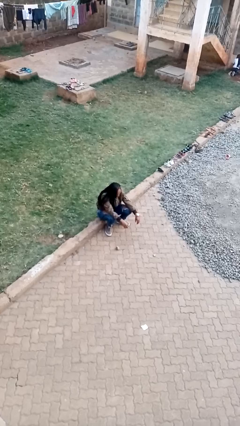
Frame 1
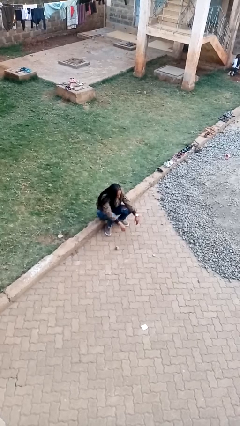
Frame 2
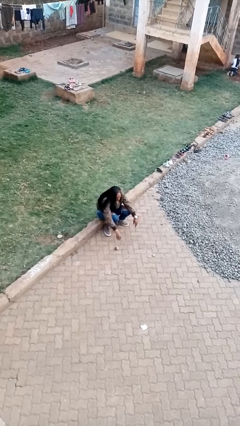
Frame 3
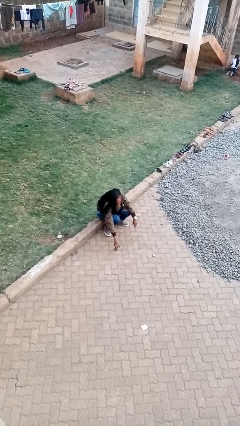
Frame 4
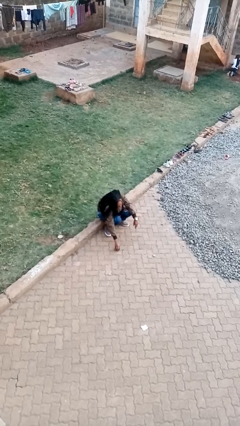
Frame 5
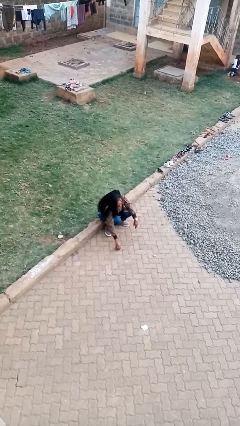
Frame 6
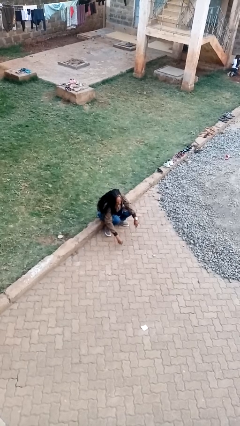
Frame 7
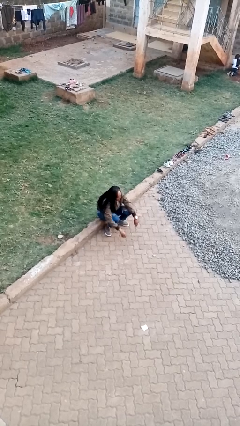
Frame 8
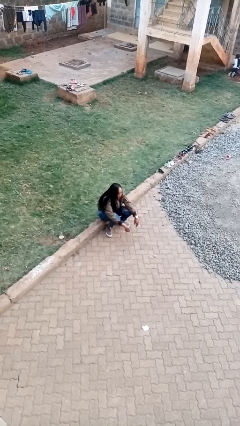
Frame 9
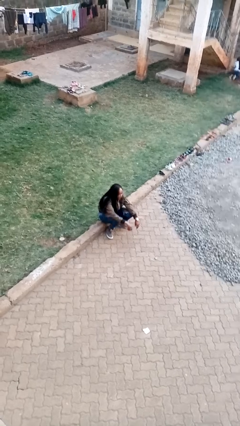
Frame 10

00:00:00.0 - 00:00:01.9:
person picks up object from floor

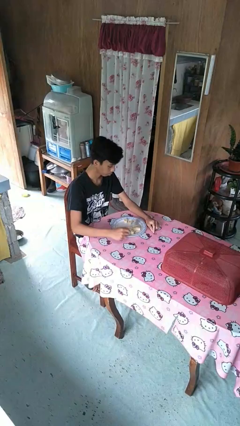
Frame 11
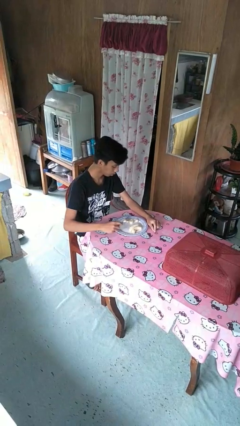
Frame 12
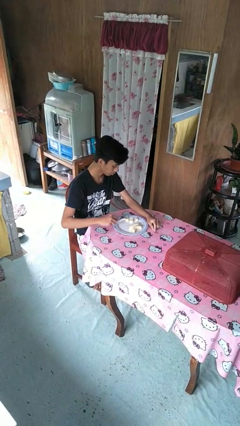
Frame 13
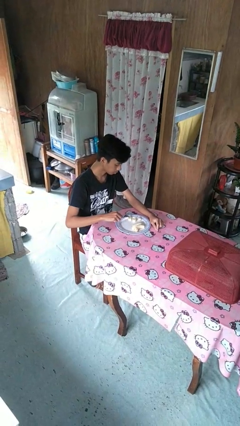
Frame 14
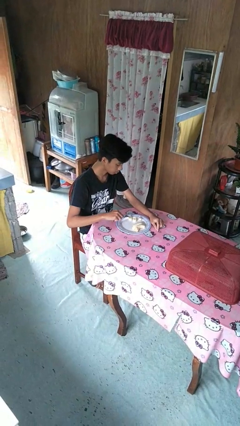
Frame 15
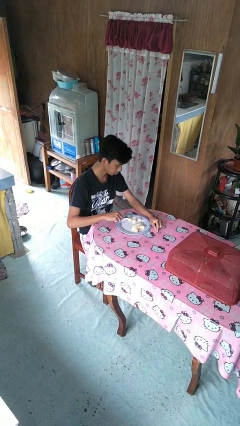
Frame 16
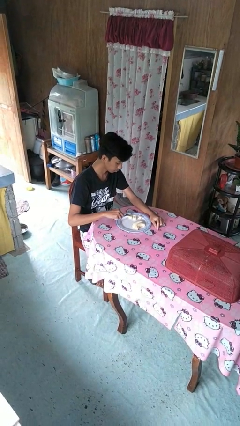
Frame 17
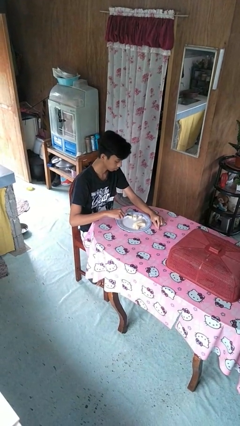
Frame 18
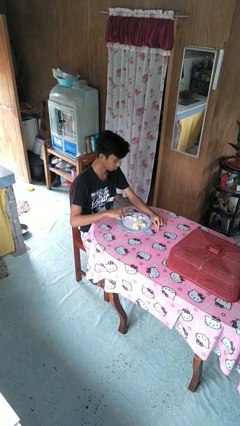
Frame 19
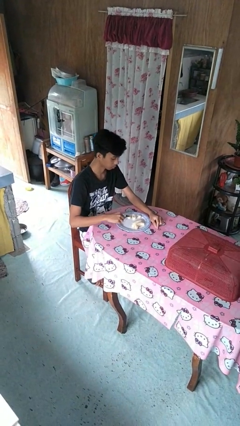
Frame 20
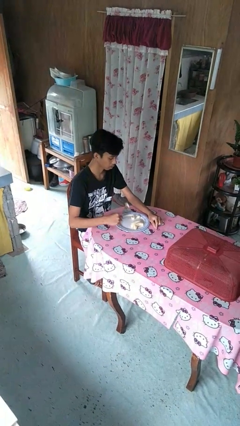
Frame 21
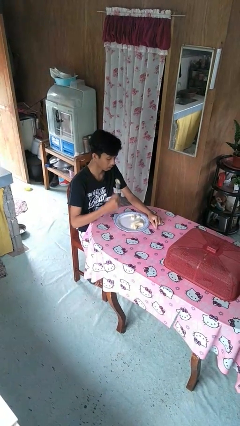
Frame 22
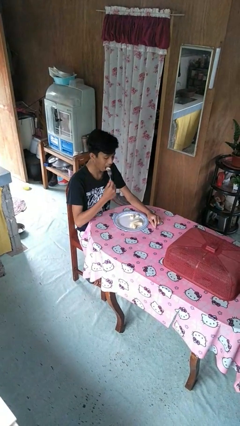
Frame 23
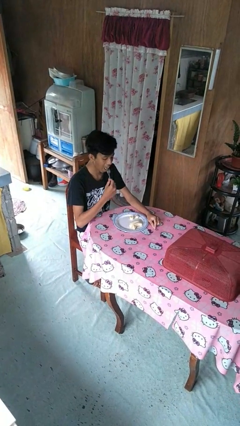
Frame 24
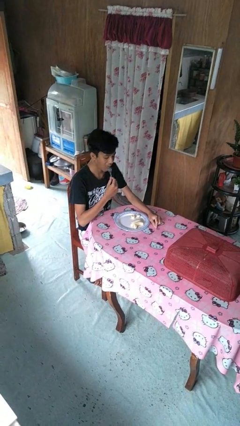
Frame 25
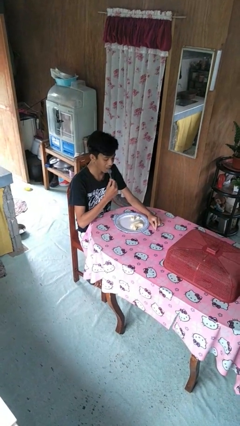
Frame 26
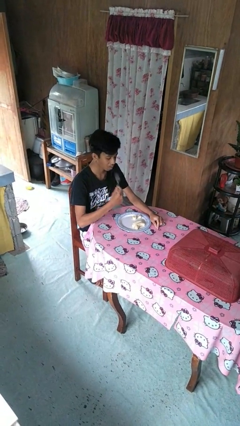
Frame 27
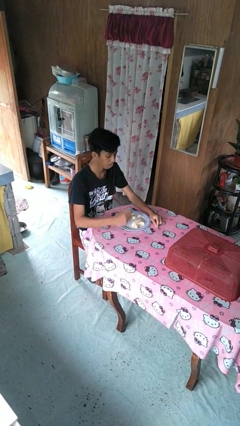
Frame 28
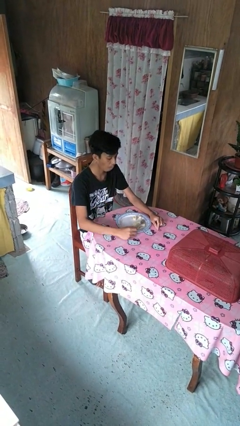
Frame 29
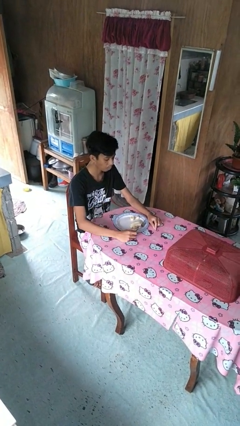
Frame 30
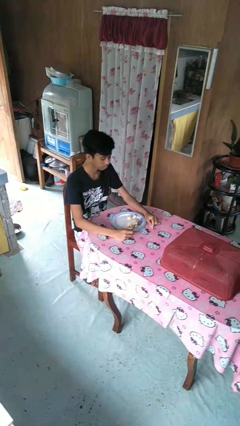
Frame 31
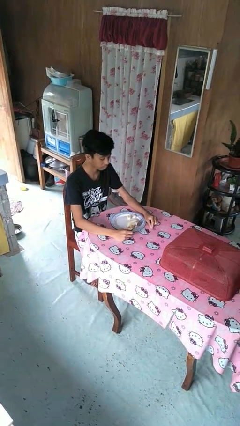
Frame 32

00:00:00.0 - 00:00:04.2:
person eats with utensil

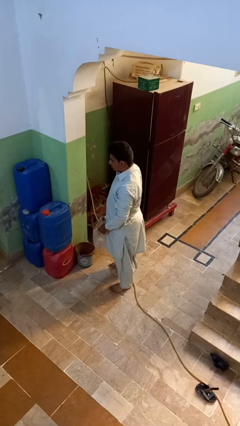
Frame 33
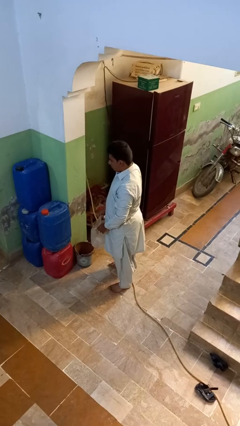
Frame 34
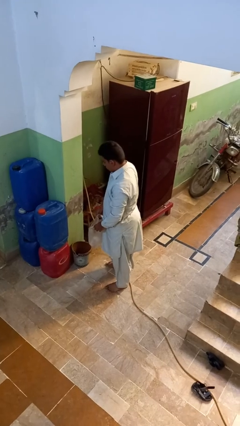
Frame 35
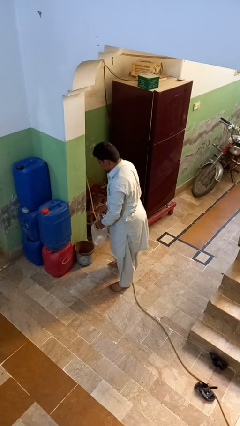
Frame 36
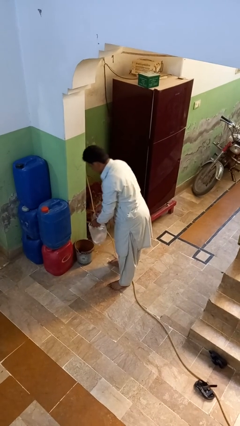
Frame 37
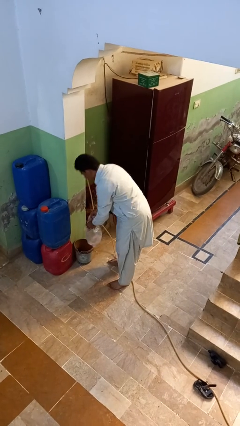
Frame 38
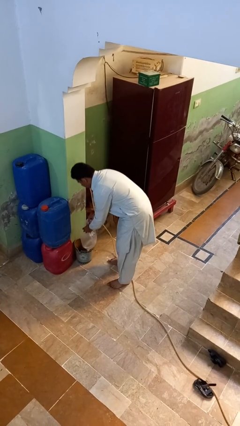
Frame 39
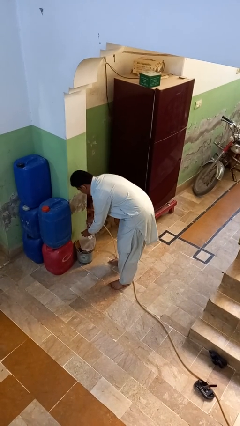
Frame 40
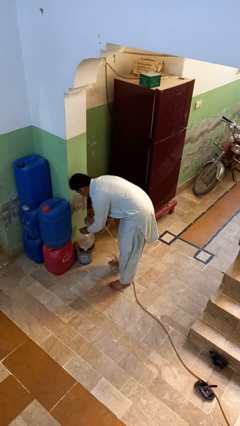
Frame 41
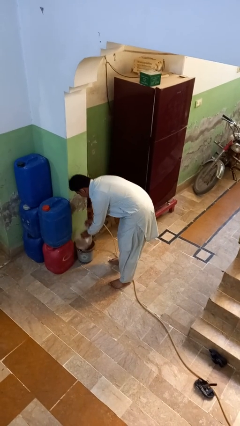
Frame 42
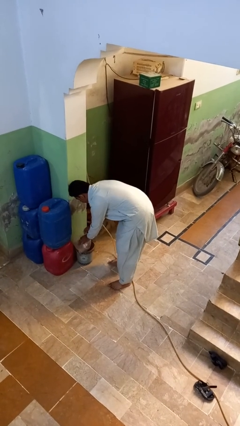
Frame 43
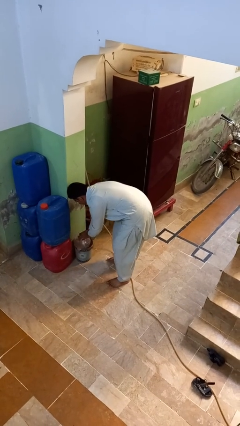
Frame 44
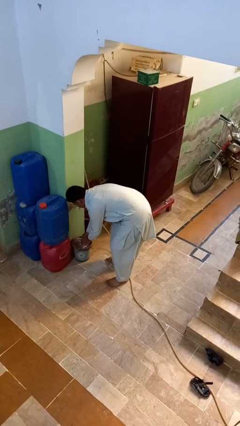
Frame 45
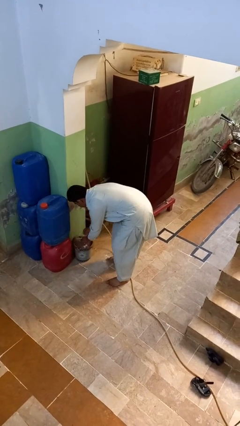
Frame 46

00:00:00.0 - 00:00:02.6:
person inserts trashbag into trashcan

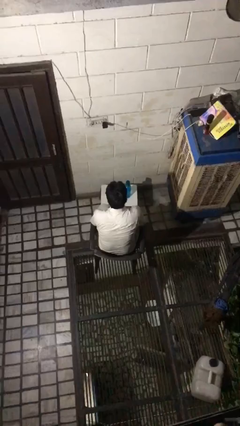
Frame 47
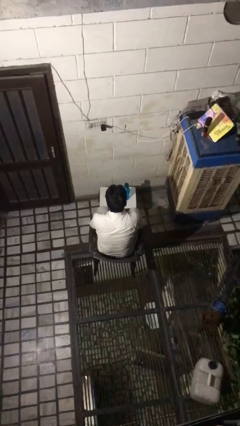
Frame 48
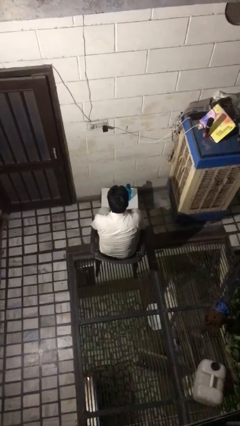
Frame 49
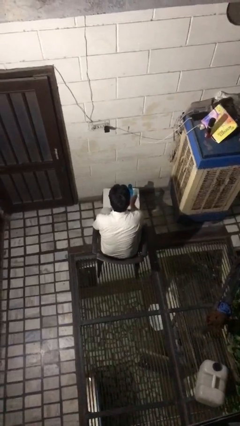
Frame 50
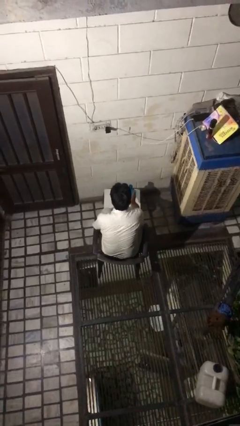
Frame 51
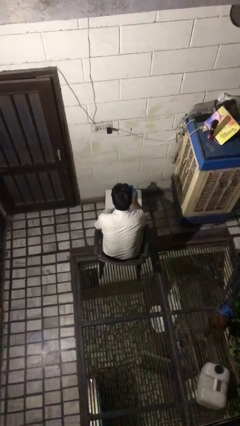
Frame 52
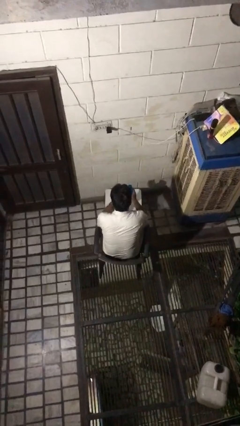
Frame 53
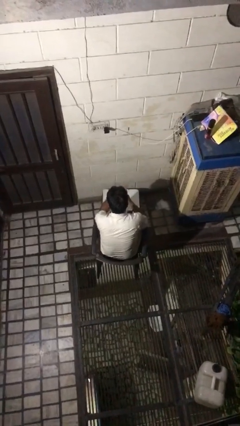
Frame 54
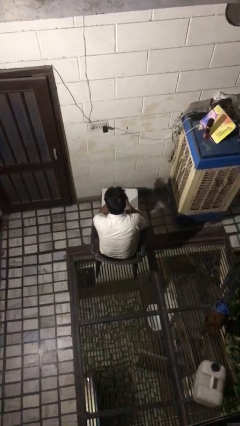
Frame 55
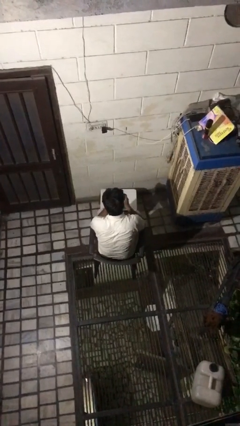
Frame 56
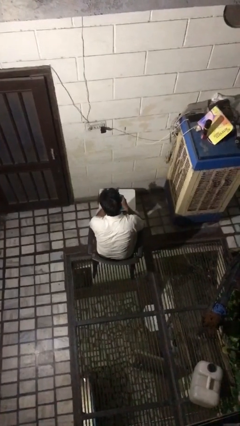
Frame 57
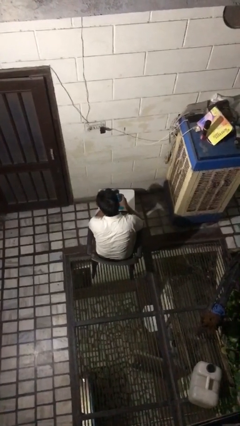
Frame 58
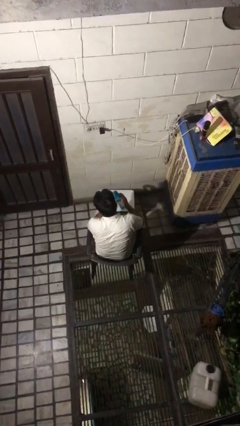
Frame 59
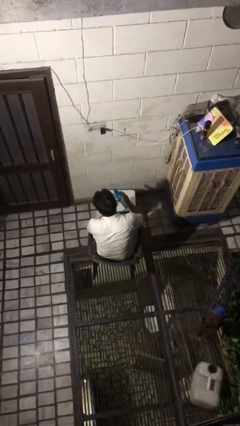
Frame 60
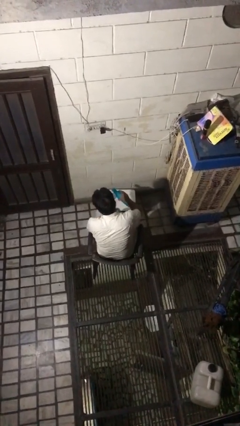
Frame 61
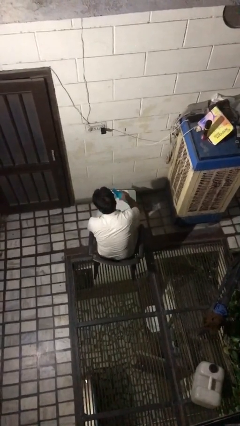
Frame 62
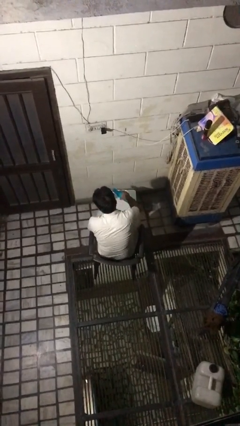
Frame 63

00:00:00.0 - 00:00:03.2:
person unscrews lid from bottle

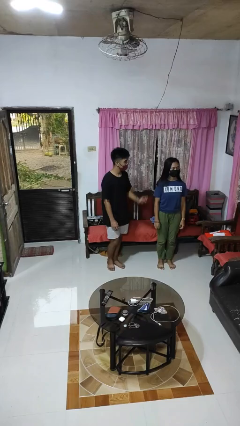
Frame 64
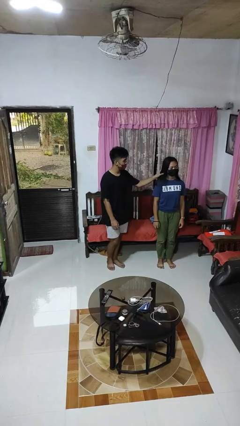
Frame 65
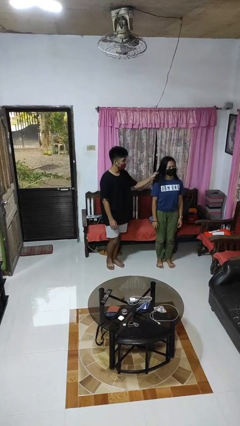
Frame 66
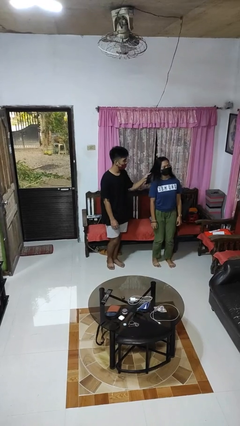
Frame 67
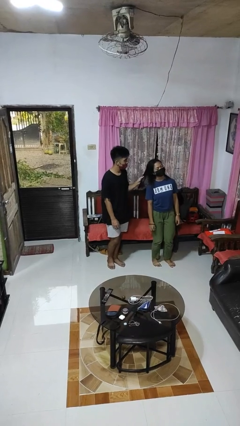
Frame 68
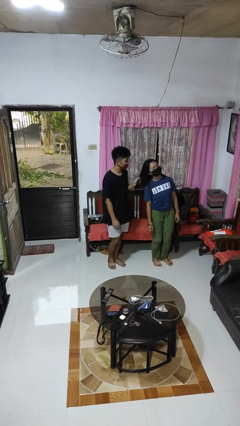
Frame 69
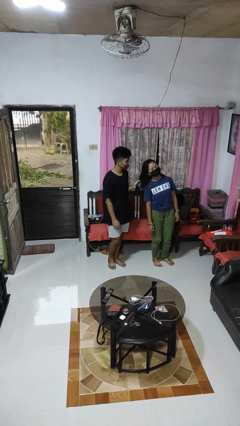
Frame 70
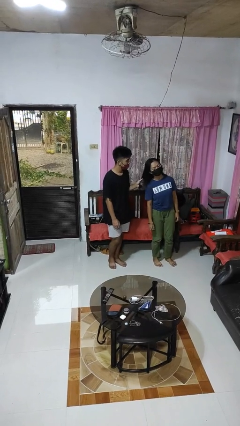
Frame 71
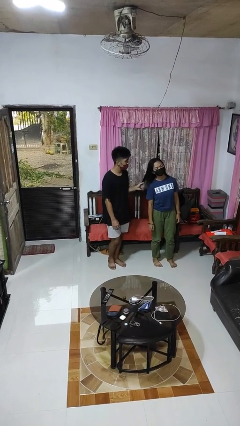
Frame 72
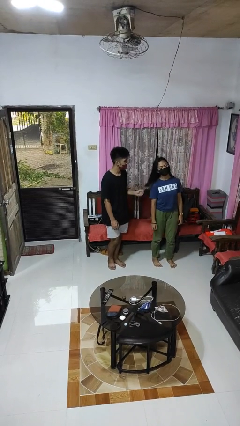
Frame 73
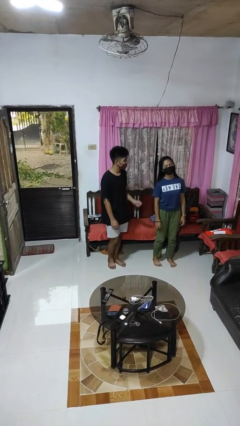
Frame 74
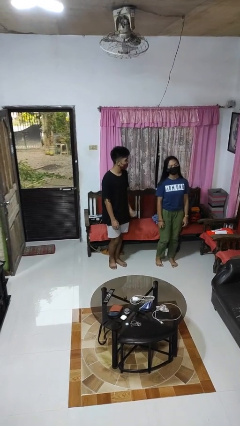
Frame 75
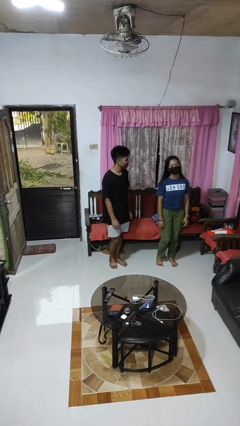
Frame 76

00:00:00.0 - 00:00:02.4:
person grabs person by hair

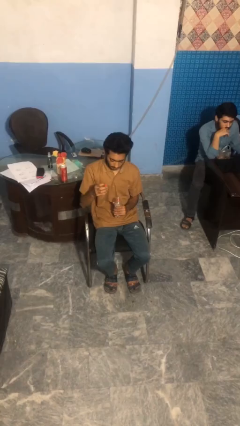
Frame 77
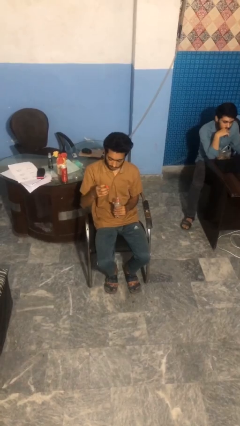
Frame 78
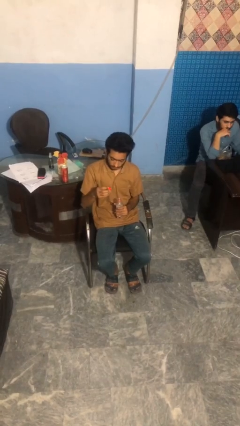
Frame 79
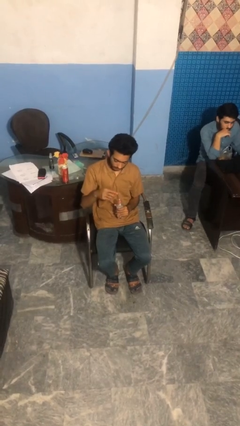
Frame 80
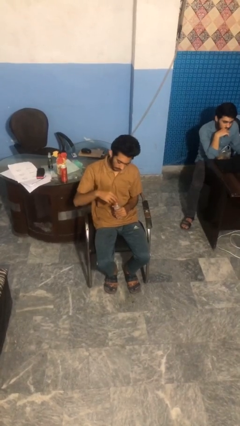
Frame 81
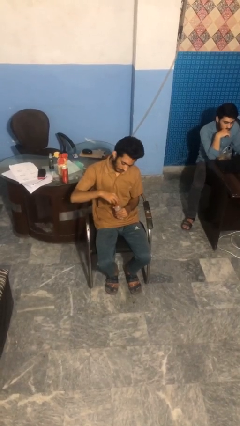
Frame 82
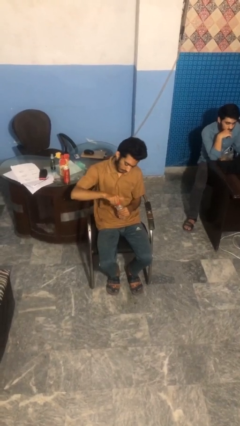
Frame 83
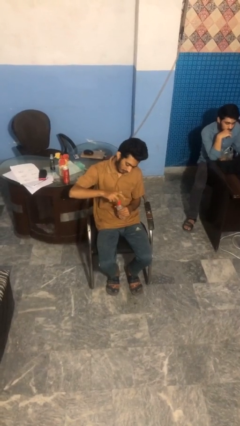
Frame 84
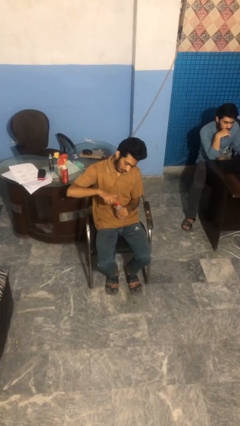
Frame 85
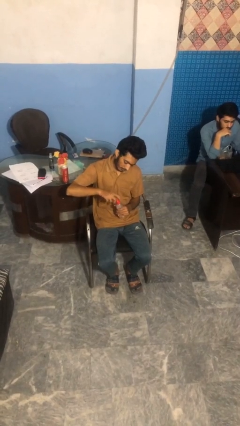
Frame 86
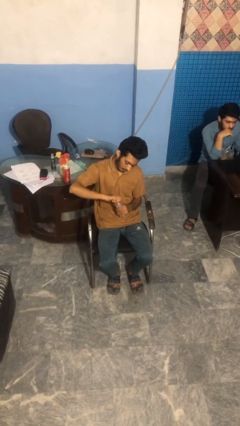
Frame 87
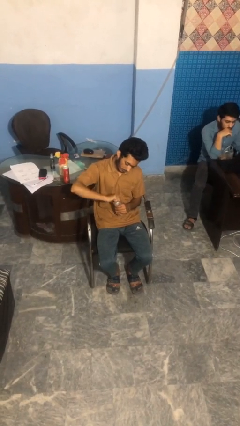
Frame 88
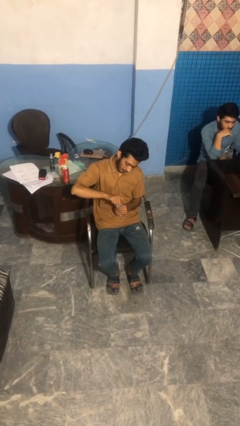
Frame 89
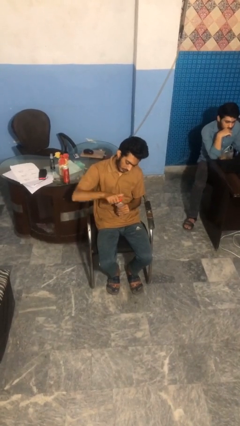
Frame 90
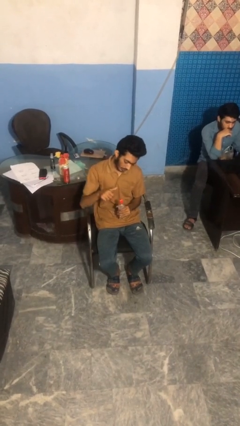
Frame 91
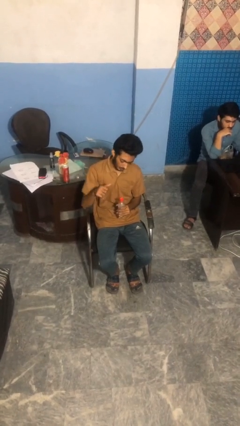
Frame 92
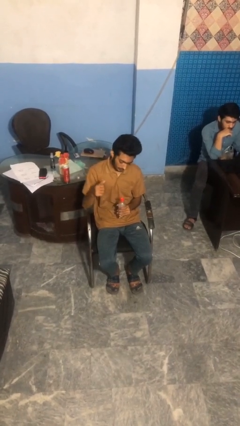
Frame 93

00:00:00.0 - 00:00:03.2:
person screws lid to bottle

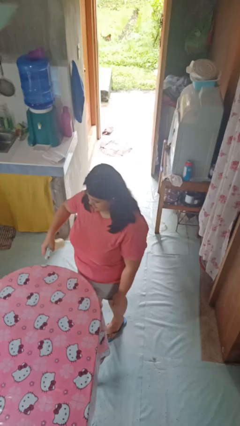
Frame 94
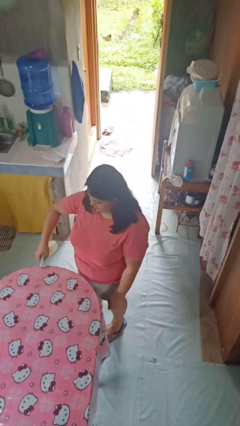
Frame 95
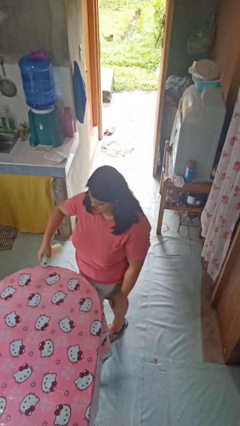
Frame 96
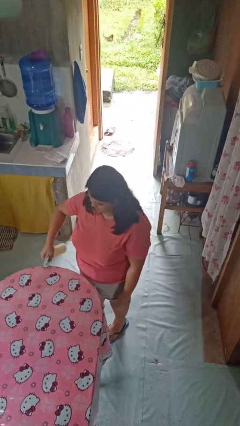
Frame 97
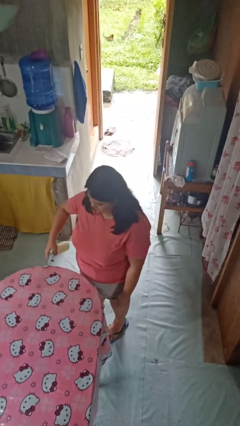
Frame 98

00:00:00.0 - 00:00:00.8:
person sprays from bottle
